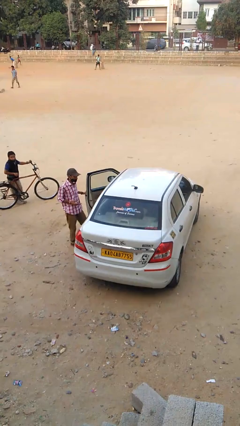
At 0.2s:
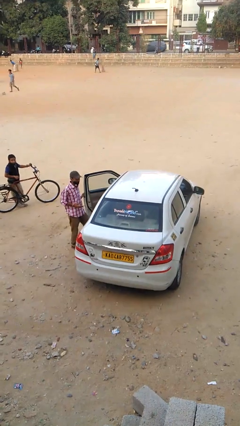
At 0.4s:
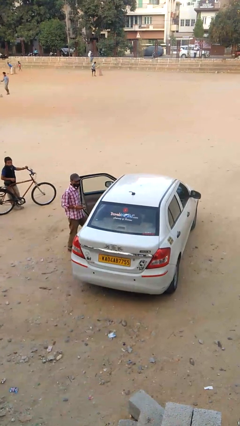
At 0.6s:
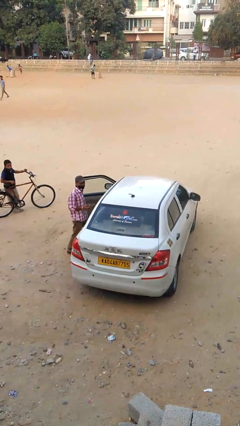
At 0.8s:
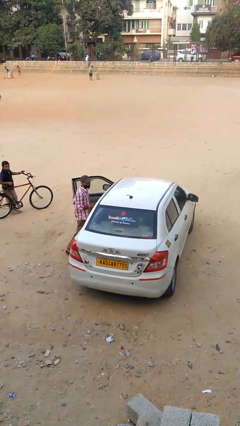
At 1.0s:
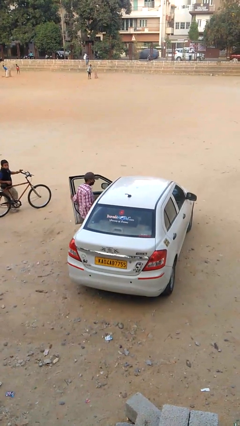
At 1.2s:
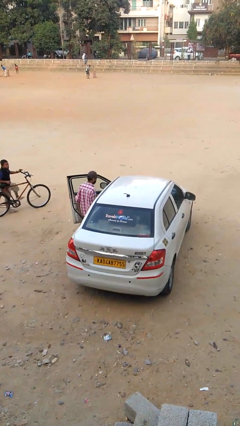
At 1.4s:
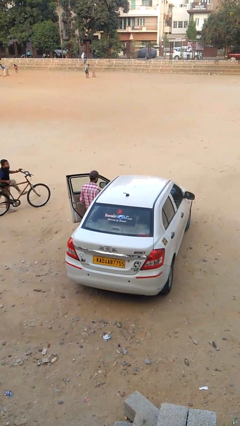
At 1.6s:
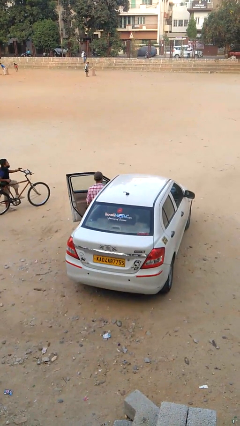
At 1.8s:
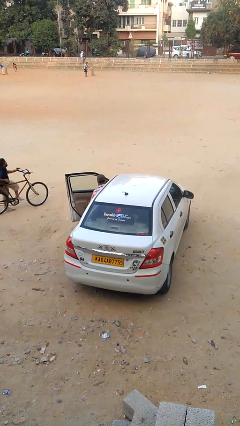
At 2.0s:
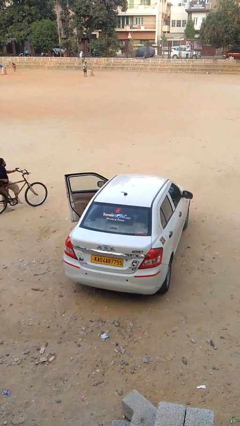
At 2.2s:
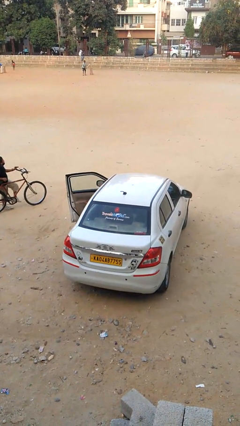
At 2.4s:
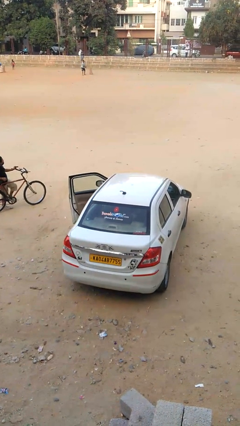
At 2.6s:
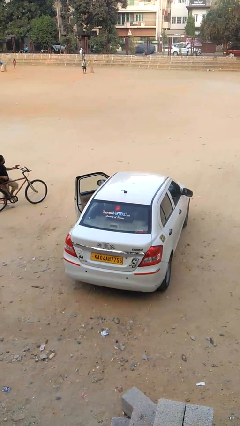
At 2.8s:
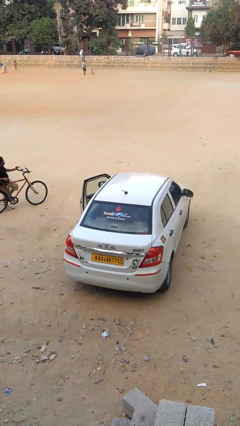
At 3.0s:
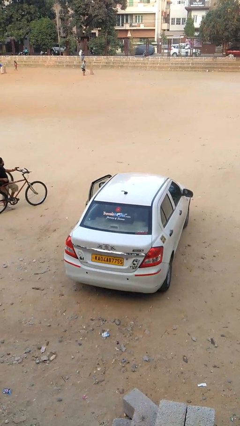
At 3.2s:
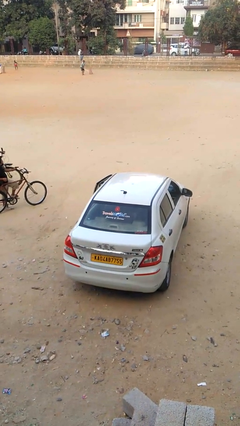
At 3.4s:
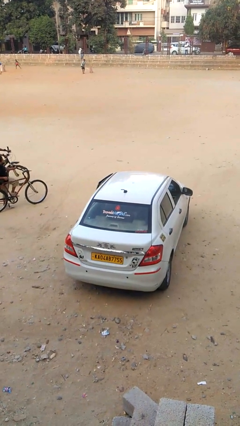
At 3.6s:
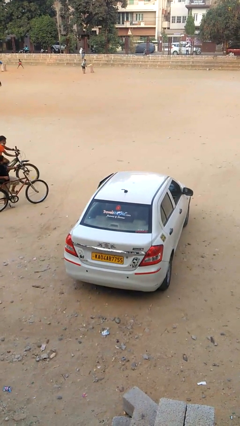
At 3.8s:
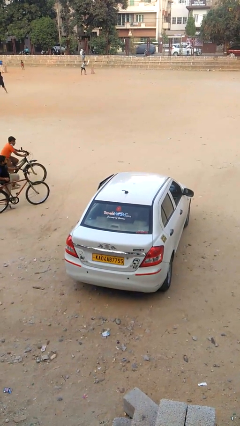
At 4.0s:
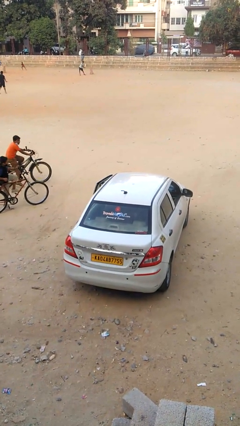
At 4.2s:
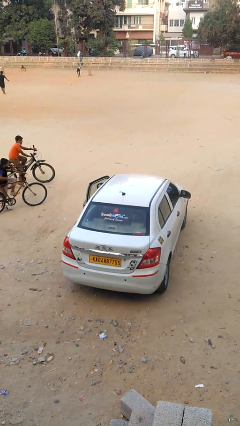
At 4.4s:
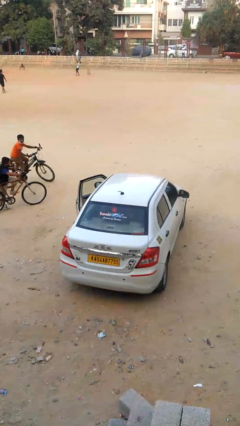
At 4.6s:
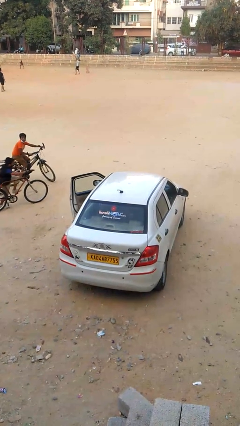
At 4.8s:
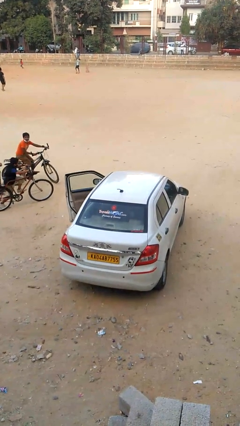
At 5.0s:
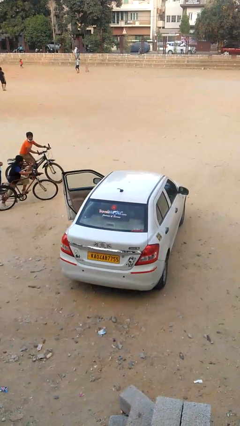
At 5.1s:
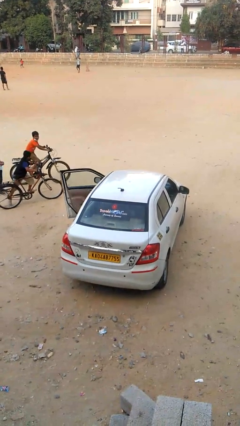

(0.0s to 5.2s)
car picks up person

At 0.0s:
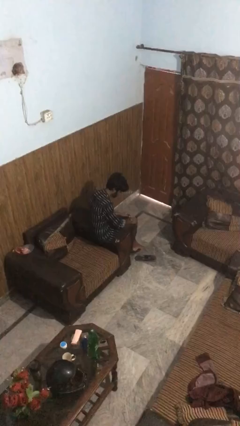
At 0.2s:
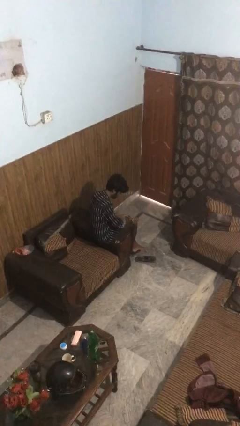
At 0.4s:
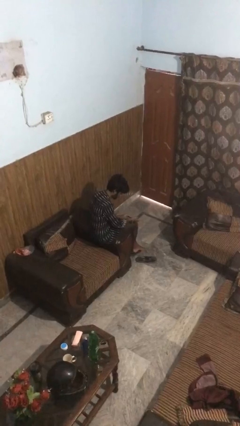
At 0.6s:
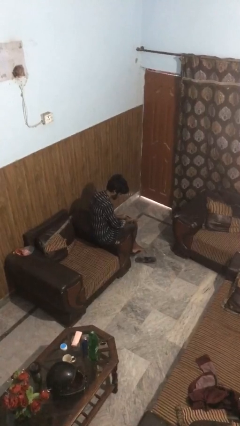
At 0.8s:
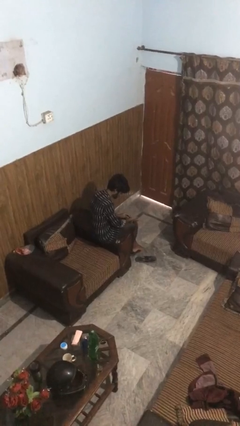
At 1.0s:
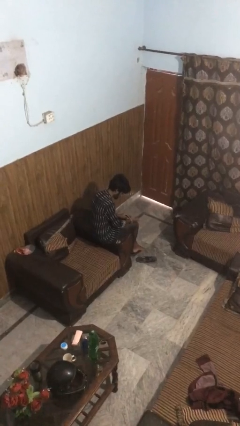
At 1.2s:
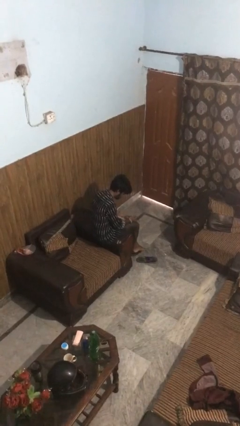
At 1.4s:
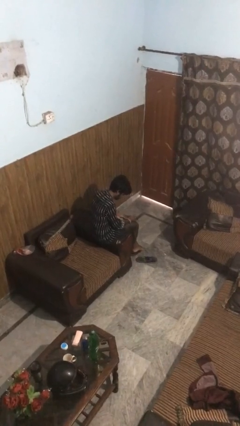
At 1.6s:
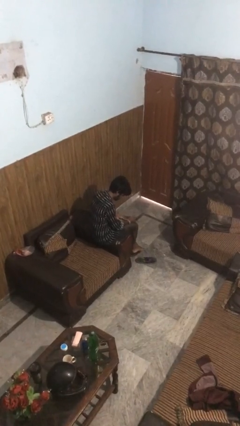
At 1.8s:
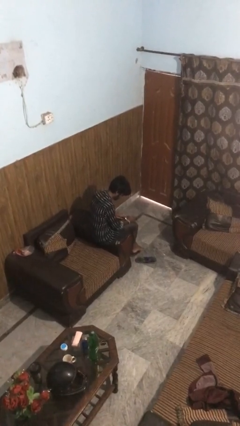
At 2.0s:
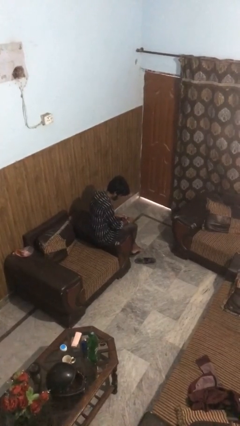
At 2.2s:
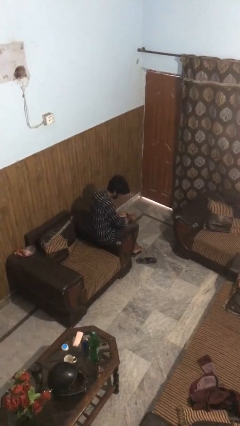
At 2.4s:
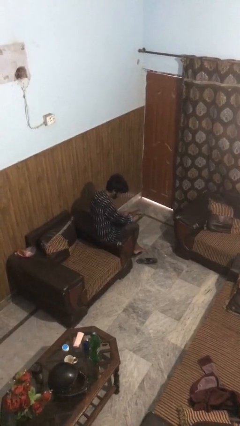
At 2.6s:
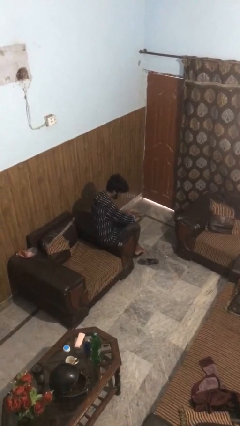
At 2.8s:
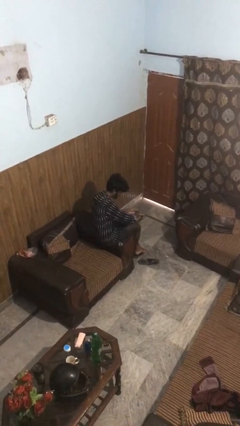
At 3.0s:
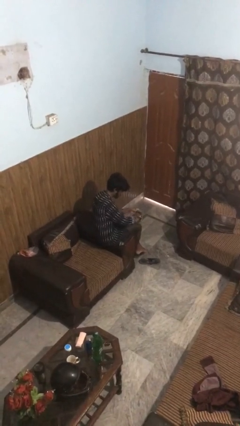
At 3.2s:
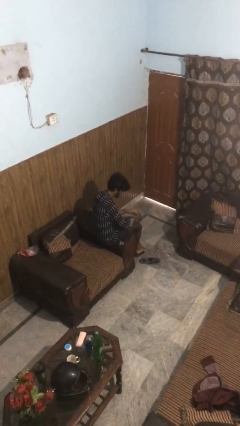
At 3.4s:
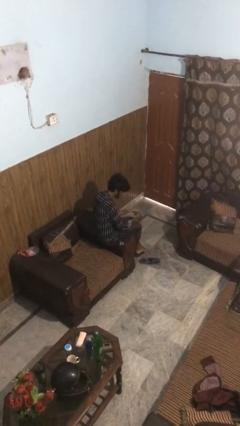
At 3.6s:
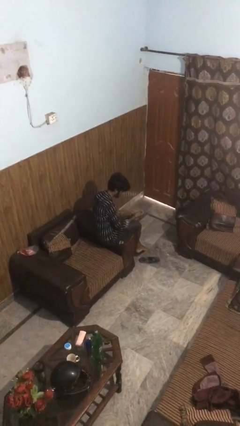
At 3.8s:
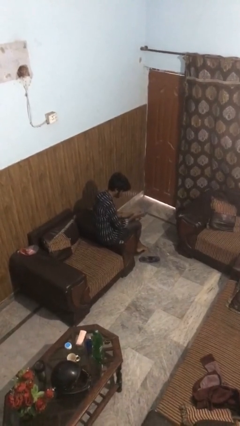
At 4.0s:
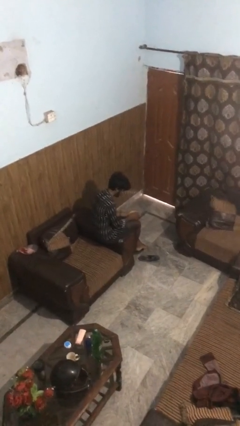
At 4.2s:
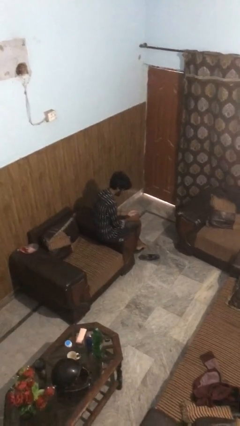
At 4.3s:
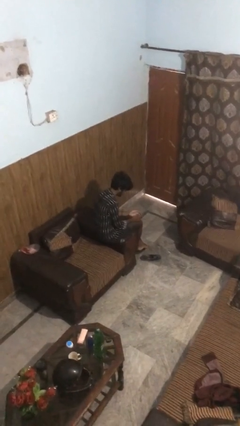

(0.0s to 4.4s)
person takes off wristwatch

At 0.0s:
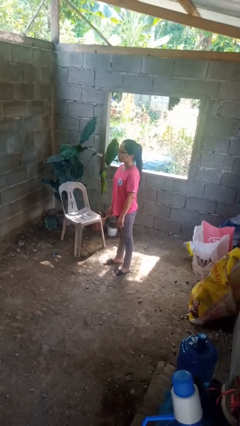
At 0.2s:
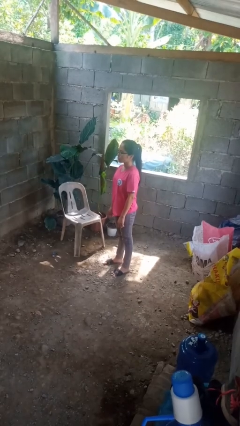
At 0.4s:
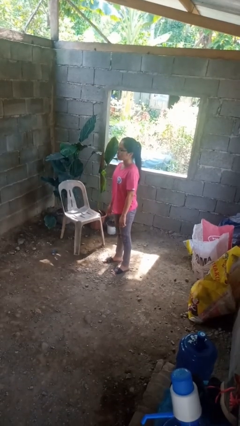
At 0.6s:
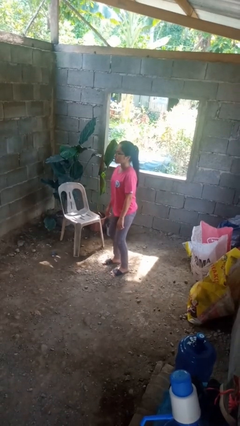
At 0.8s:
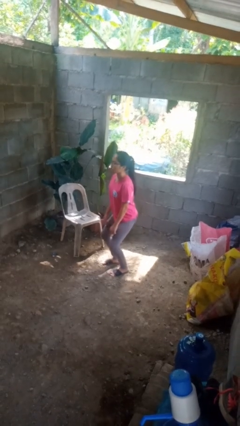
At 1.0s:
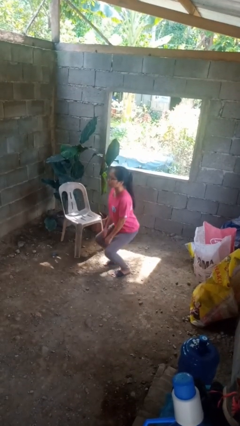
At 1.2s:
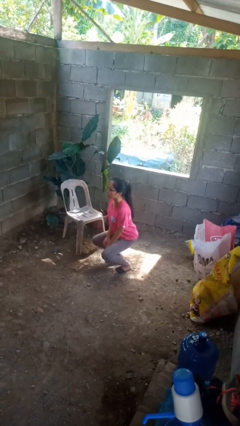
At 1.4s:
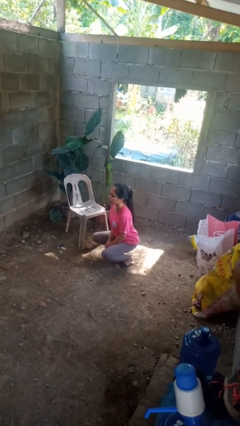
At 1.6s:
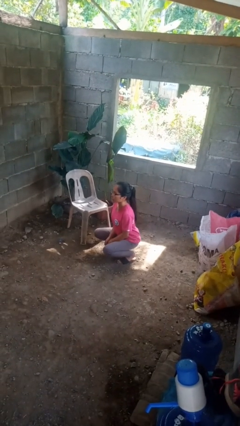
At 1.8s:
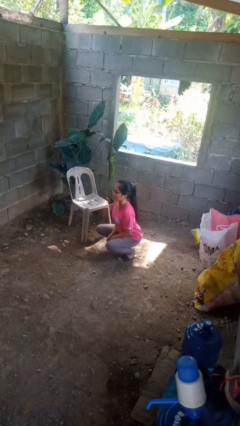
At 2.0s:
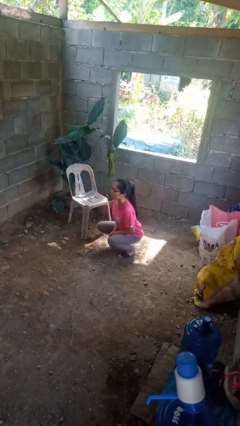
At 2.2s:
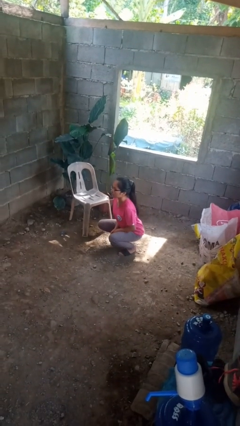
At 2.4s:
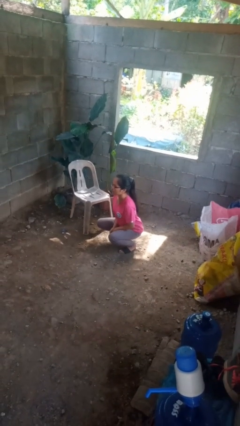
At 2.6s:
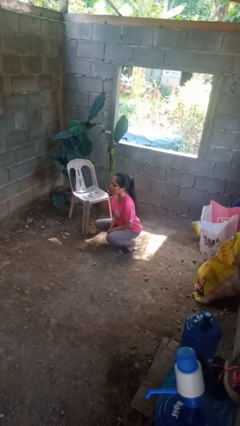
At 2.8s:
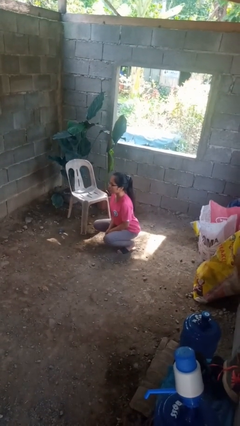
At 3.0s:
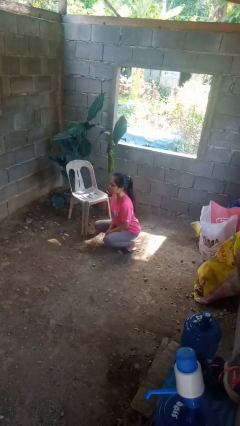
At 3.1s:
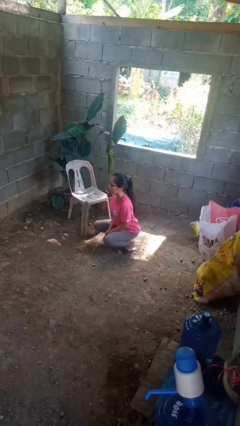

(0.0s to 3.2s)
person squats

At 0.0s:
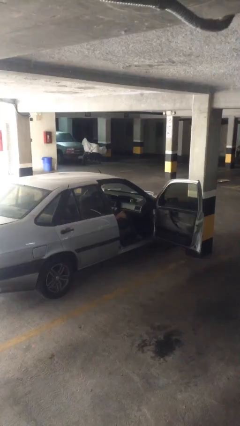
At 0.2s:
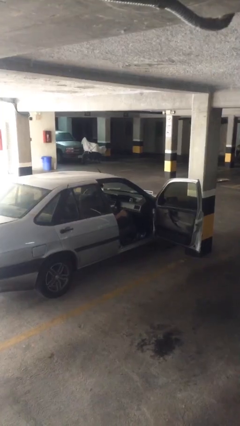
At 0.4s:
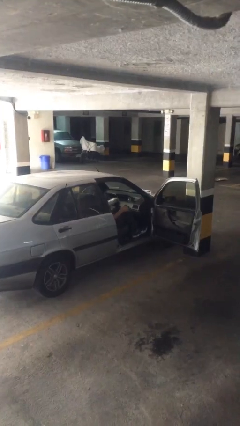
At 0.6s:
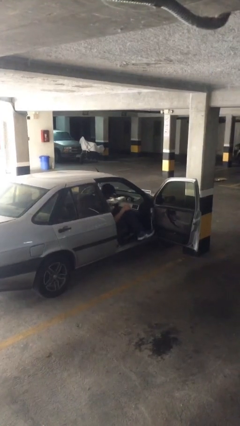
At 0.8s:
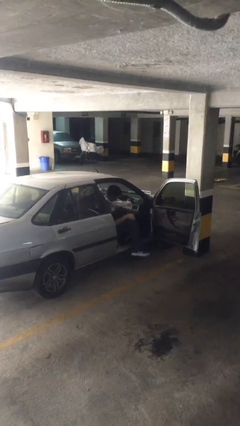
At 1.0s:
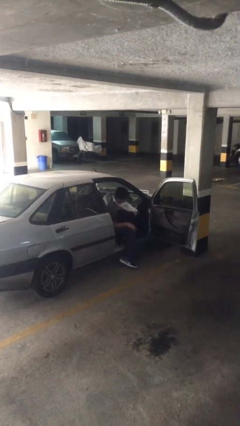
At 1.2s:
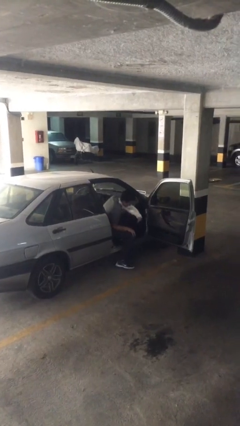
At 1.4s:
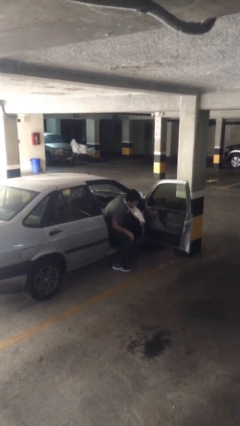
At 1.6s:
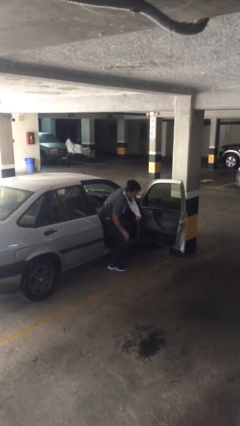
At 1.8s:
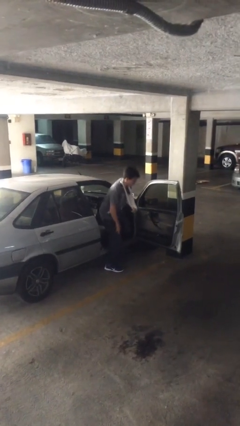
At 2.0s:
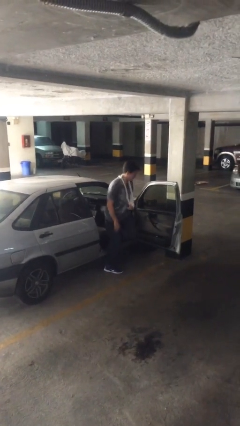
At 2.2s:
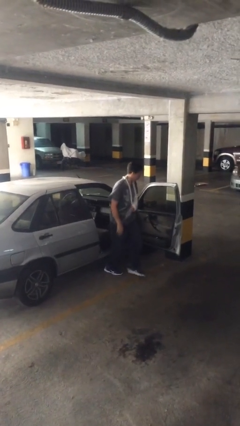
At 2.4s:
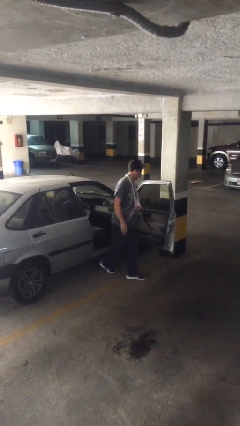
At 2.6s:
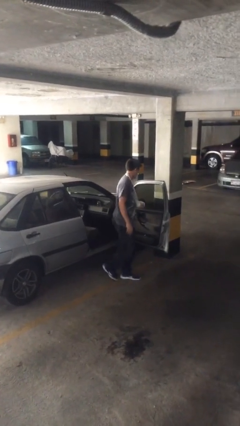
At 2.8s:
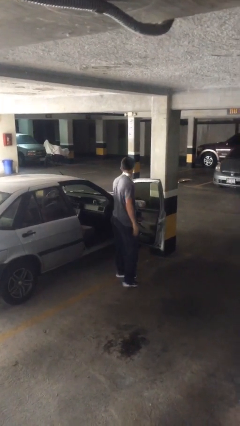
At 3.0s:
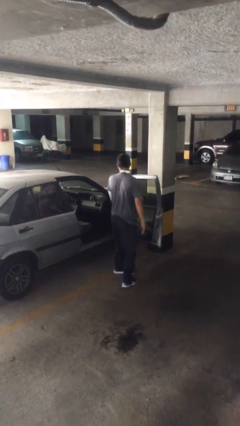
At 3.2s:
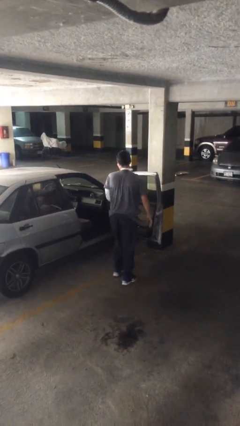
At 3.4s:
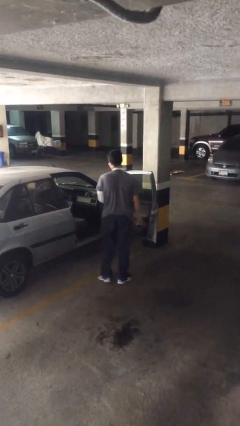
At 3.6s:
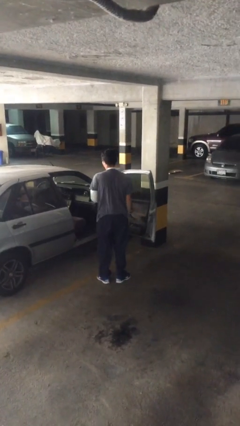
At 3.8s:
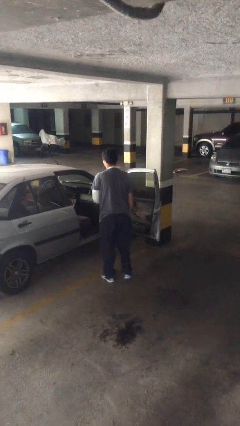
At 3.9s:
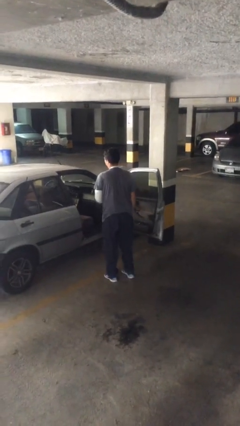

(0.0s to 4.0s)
person exits car

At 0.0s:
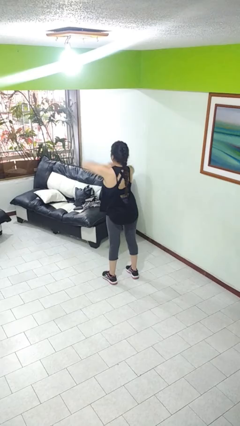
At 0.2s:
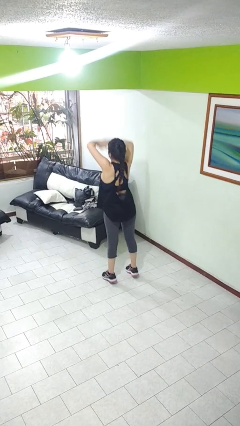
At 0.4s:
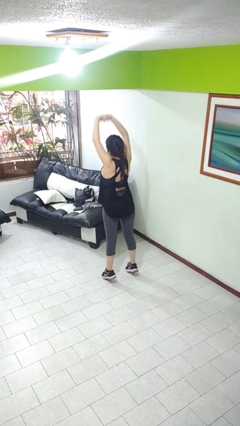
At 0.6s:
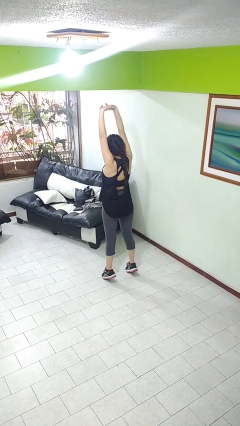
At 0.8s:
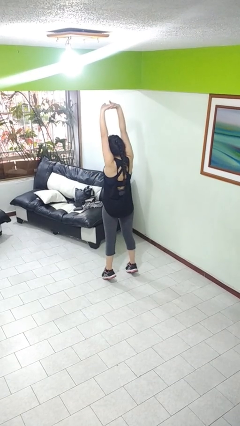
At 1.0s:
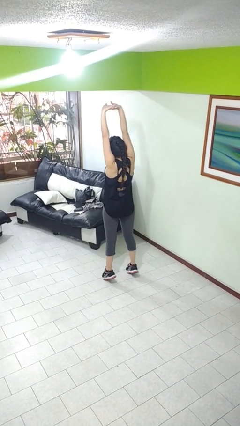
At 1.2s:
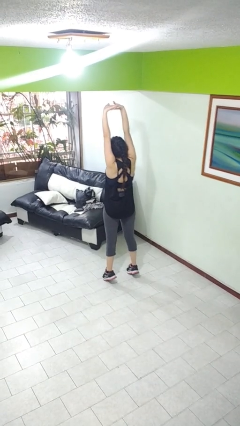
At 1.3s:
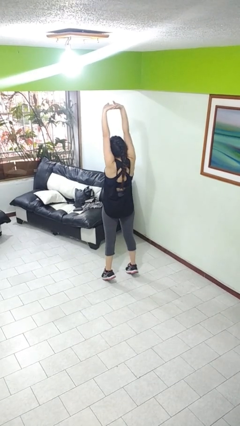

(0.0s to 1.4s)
person stretches arms over head
